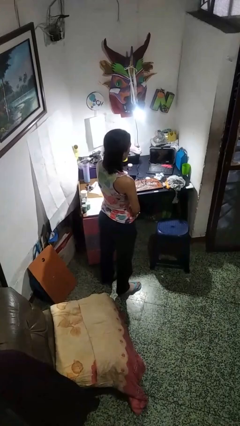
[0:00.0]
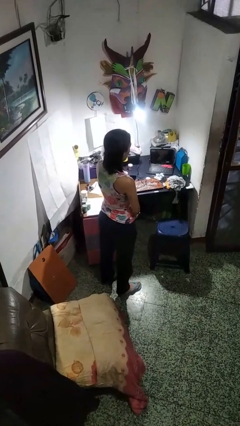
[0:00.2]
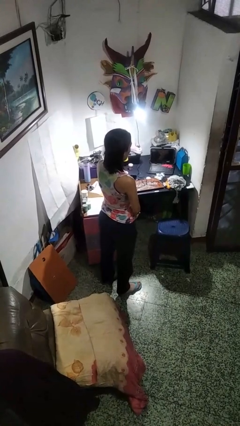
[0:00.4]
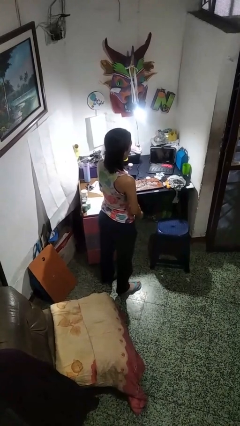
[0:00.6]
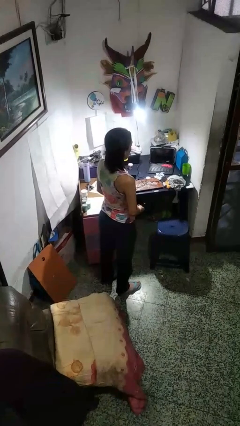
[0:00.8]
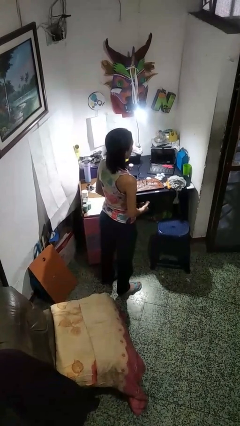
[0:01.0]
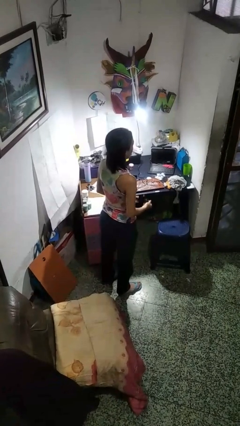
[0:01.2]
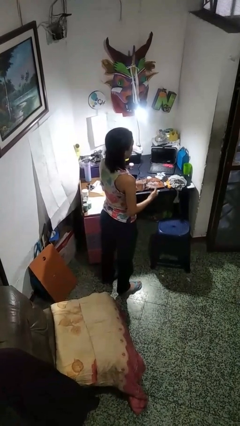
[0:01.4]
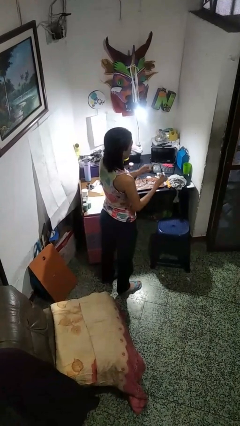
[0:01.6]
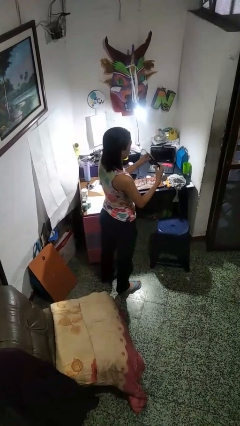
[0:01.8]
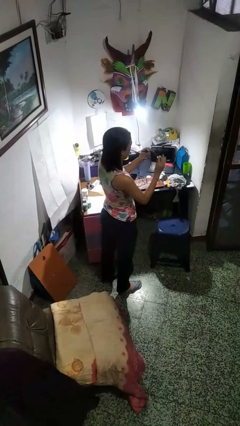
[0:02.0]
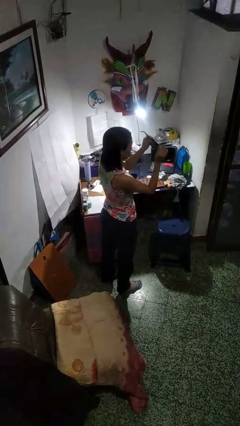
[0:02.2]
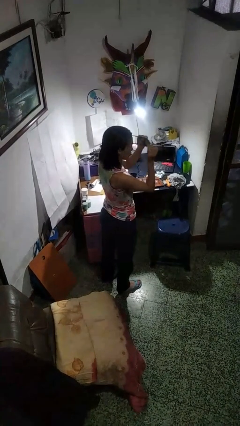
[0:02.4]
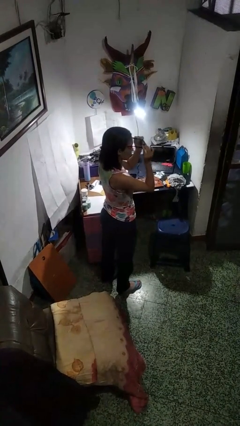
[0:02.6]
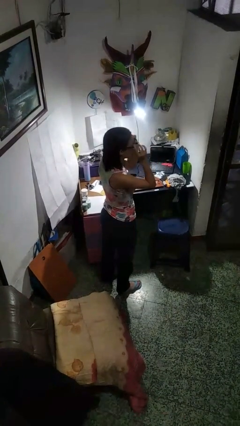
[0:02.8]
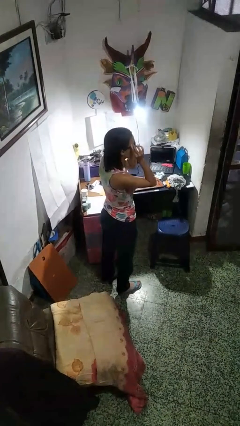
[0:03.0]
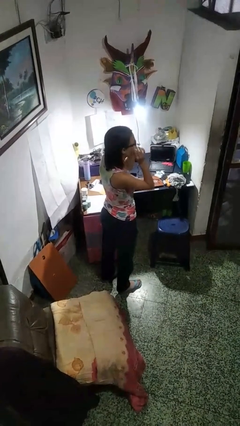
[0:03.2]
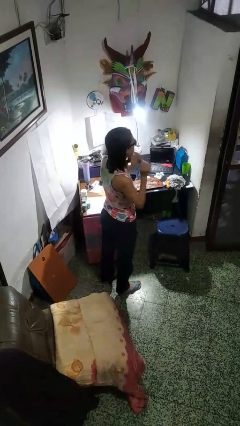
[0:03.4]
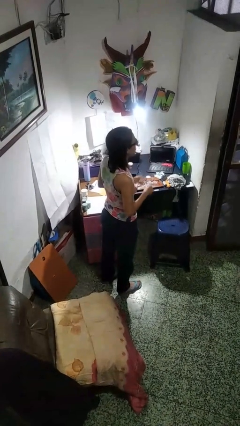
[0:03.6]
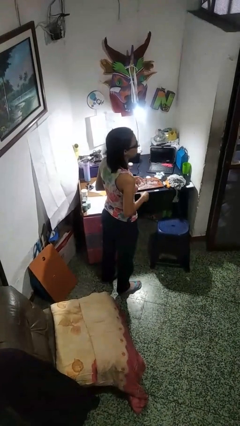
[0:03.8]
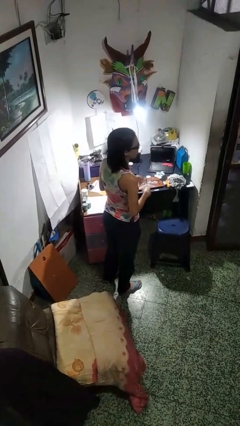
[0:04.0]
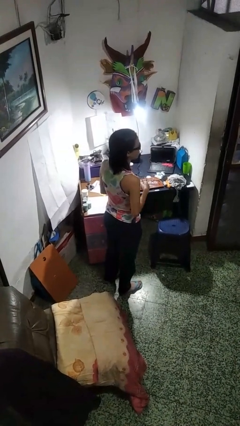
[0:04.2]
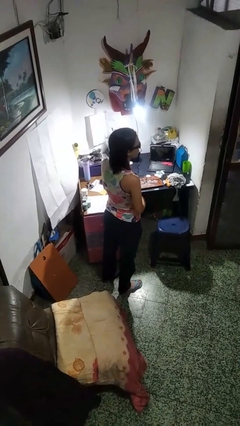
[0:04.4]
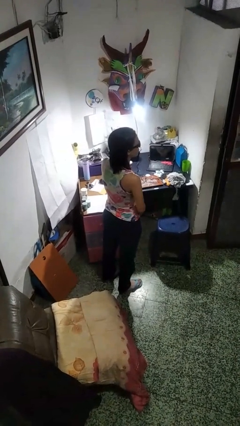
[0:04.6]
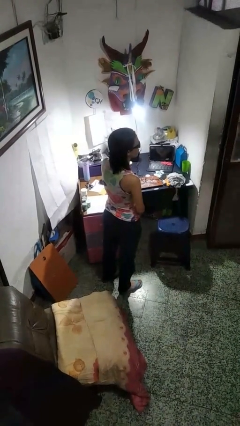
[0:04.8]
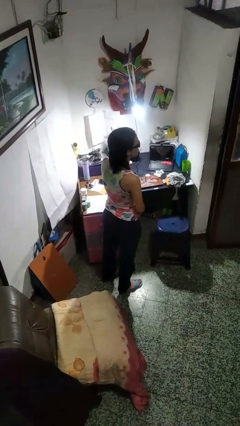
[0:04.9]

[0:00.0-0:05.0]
person puts on sunglasses

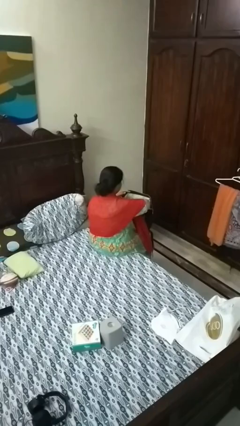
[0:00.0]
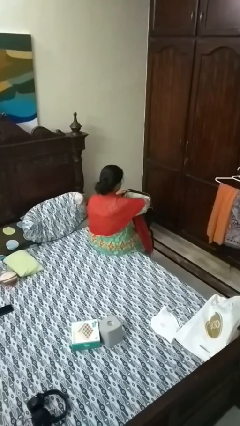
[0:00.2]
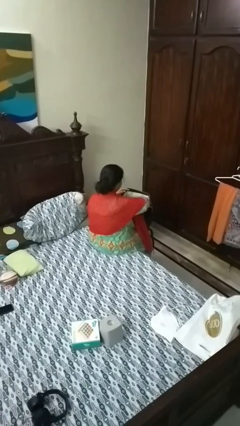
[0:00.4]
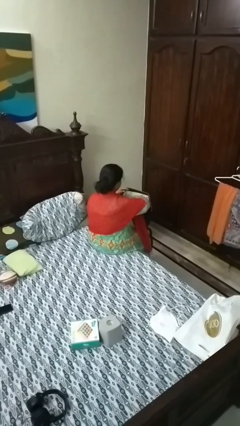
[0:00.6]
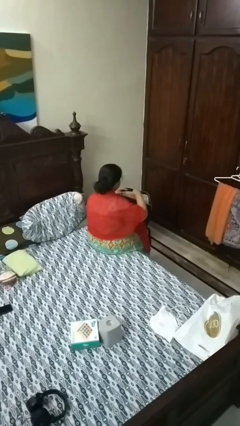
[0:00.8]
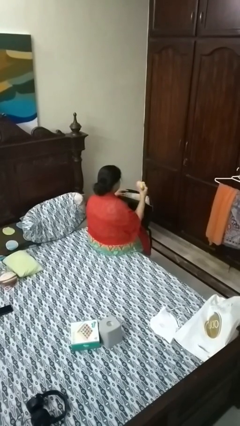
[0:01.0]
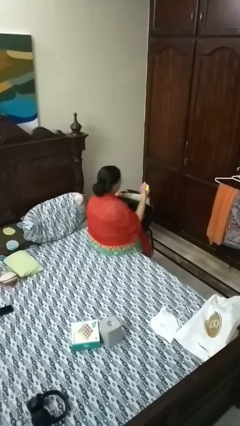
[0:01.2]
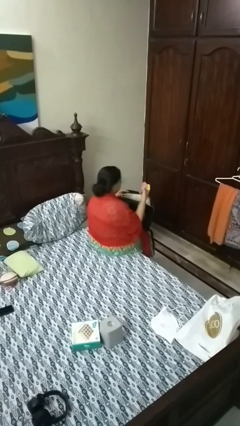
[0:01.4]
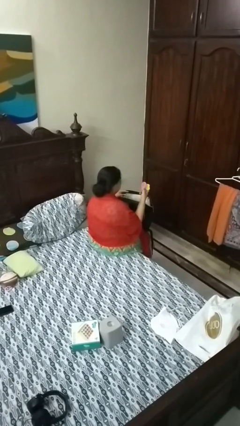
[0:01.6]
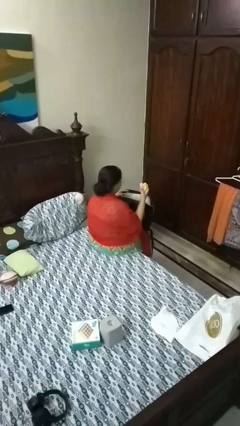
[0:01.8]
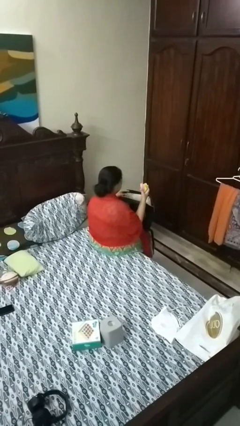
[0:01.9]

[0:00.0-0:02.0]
person takes object from backpack

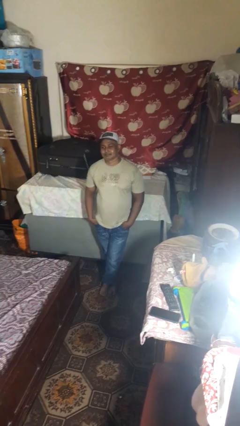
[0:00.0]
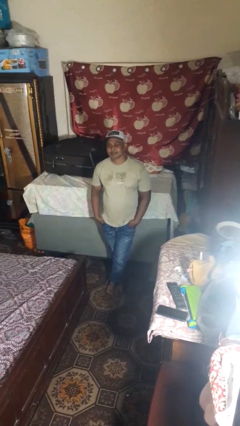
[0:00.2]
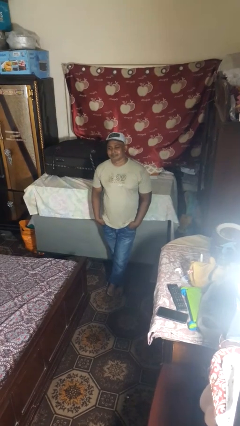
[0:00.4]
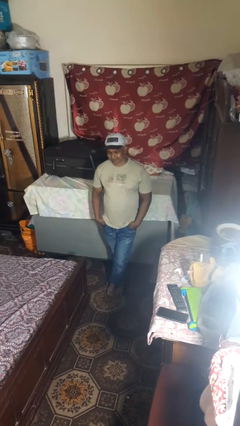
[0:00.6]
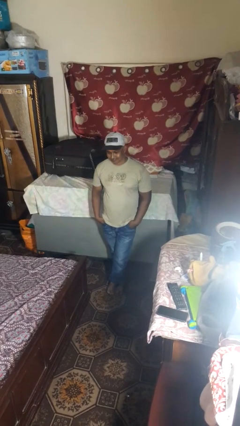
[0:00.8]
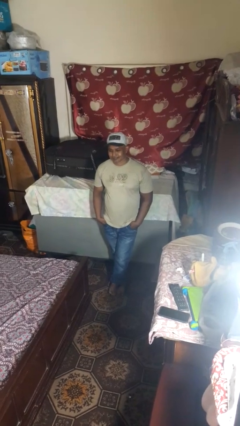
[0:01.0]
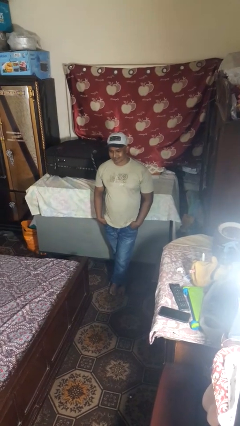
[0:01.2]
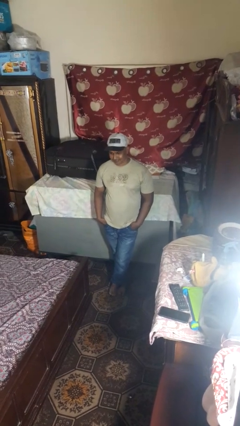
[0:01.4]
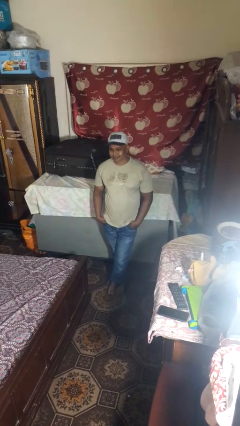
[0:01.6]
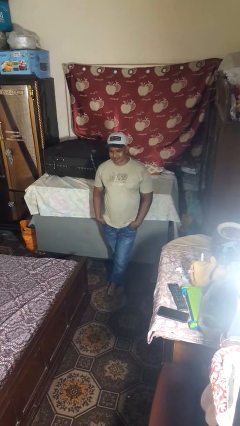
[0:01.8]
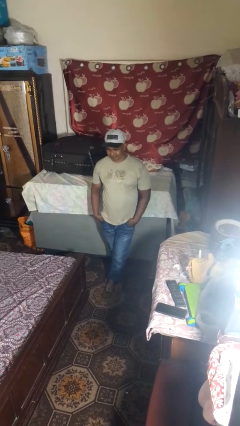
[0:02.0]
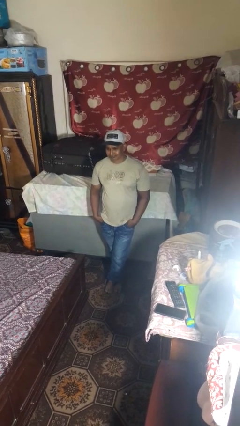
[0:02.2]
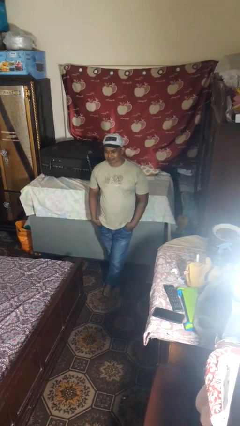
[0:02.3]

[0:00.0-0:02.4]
person nods head

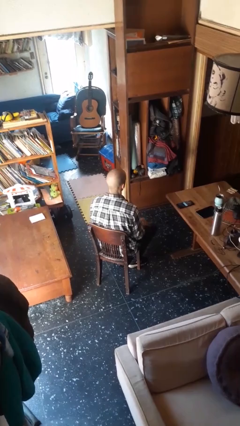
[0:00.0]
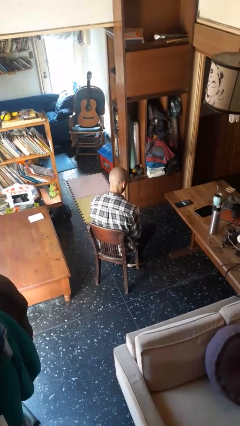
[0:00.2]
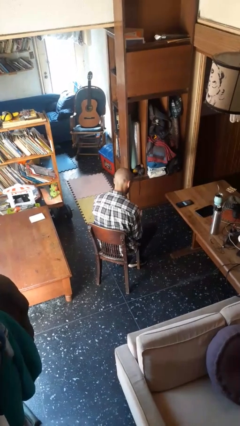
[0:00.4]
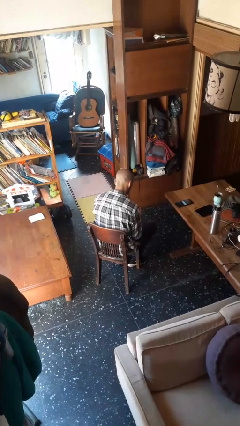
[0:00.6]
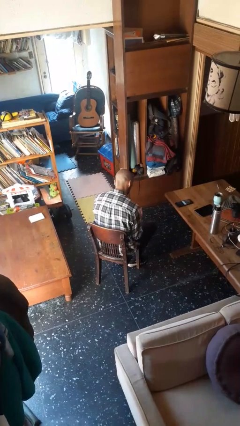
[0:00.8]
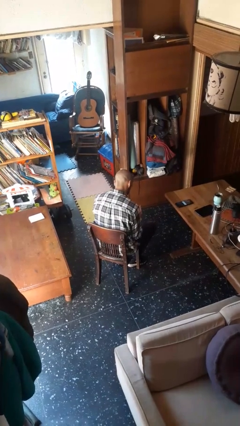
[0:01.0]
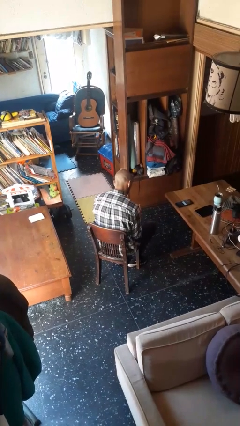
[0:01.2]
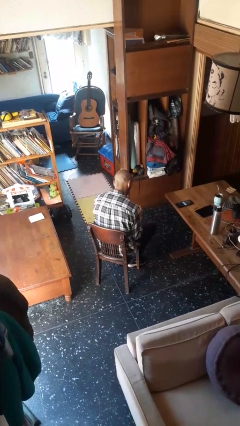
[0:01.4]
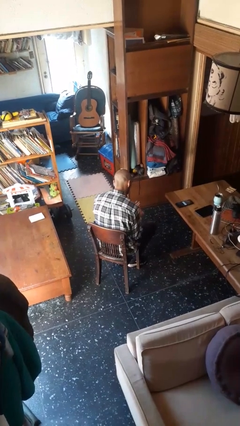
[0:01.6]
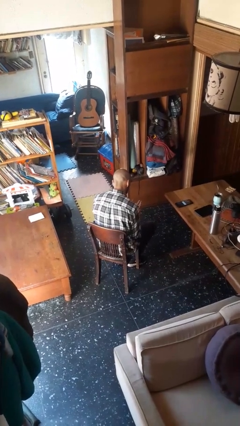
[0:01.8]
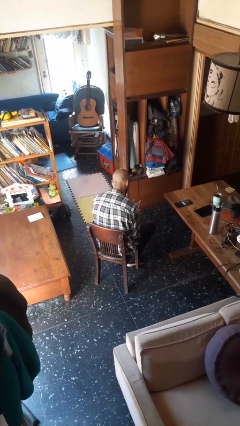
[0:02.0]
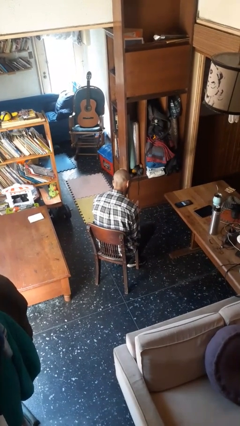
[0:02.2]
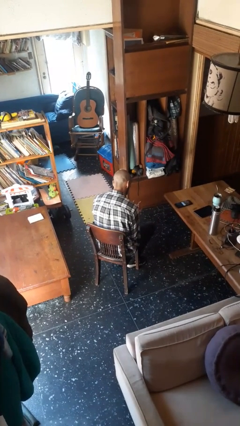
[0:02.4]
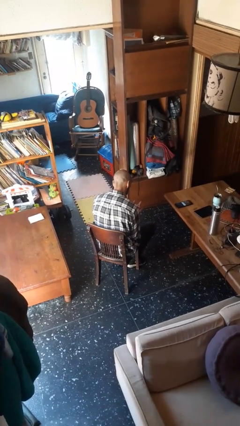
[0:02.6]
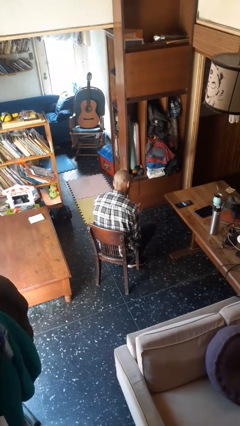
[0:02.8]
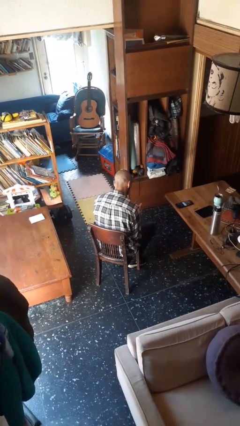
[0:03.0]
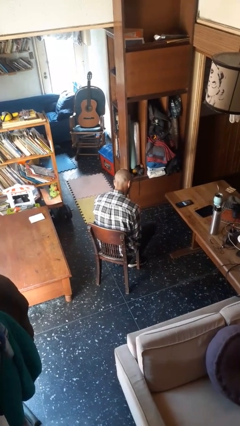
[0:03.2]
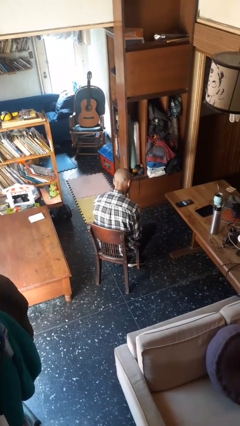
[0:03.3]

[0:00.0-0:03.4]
person looks at hands in lap

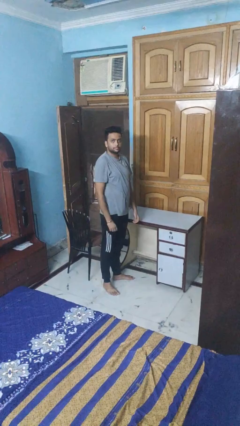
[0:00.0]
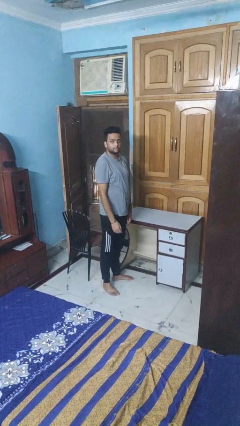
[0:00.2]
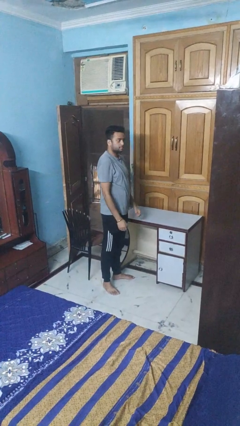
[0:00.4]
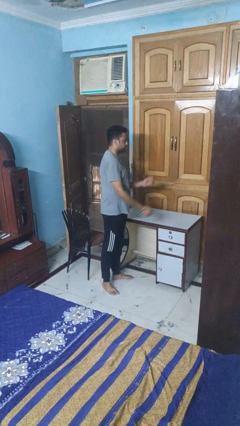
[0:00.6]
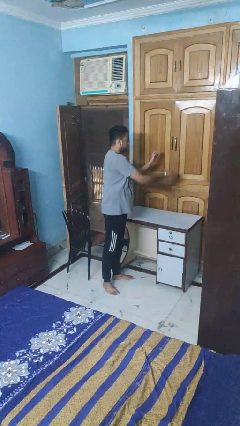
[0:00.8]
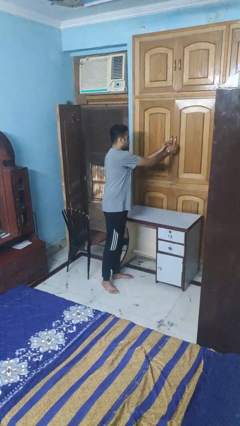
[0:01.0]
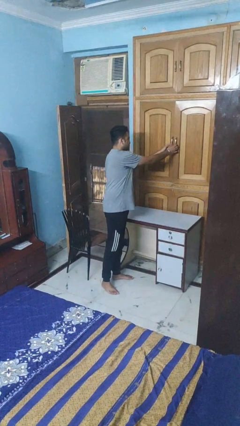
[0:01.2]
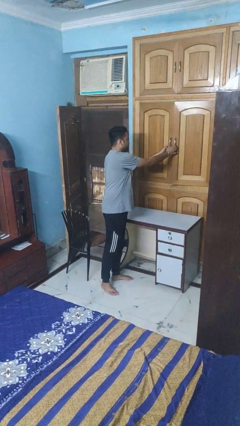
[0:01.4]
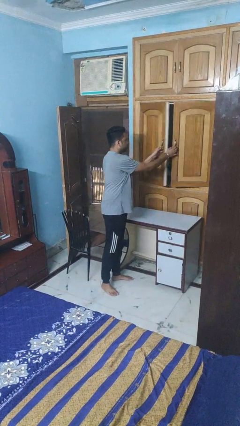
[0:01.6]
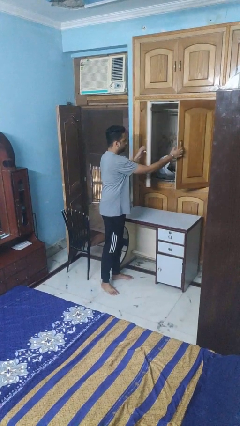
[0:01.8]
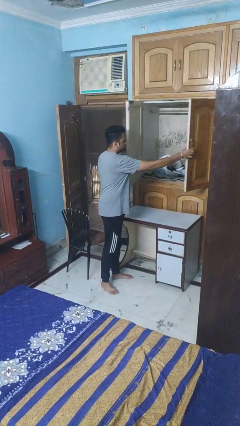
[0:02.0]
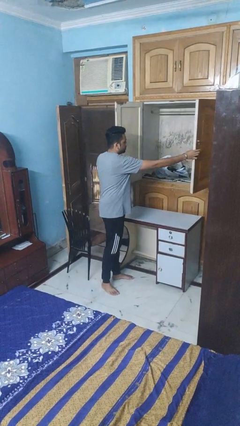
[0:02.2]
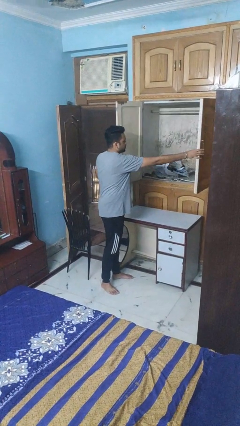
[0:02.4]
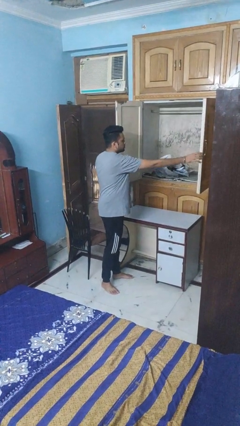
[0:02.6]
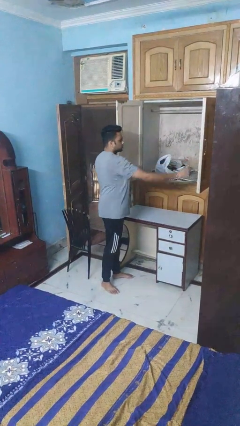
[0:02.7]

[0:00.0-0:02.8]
person opens closet door

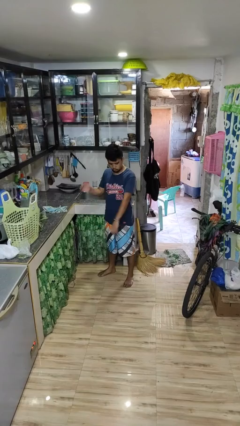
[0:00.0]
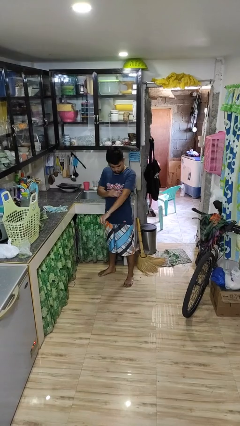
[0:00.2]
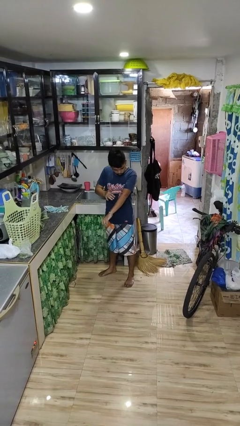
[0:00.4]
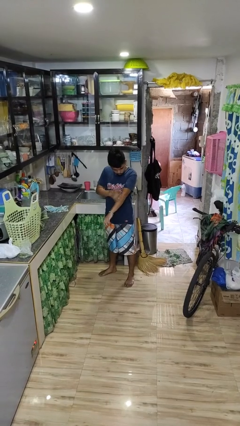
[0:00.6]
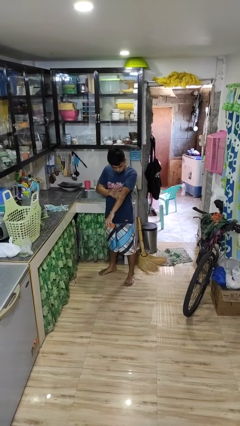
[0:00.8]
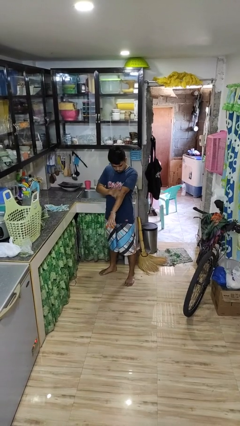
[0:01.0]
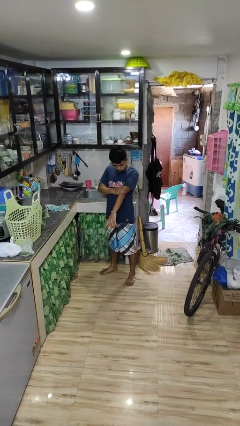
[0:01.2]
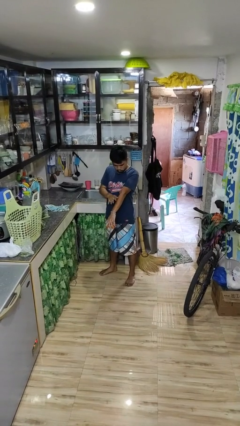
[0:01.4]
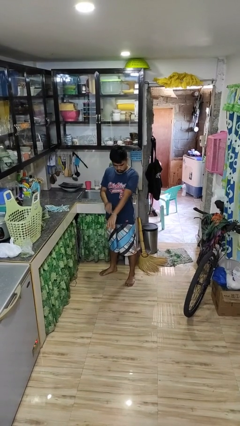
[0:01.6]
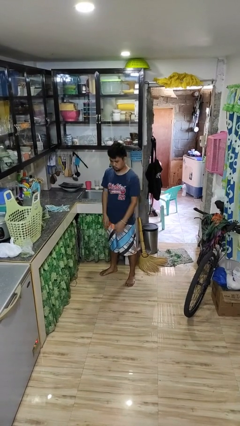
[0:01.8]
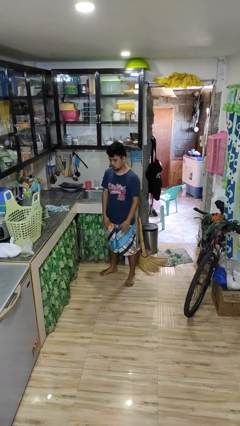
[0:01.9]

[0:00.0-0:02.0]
person swats bug

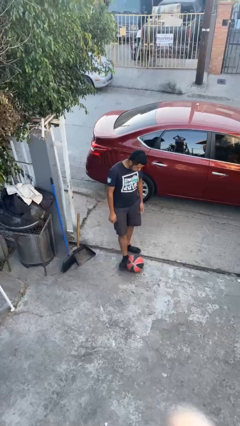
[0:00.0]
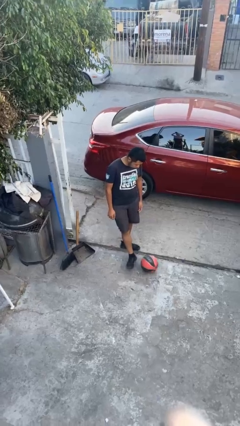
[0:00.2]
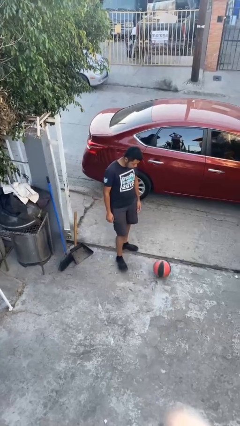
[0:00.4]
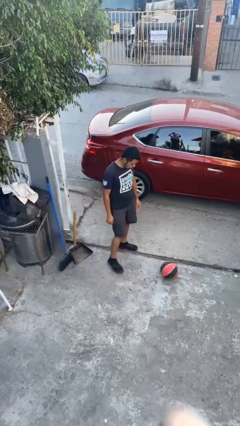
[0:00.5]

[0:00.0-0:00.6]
person kicks object to person
